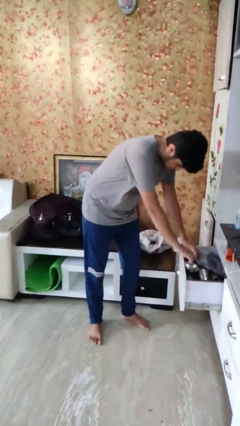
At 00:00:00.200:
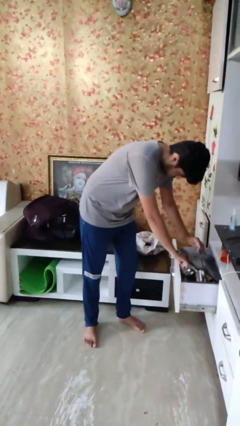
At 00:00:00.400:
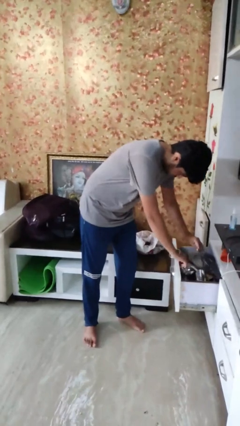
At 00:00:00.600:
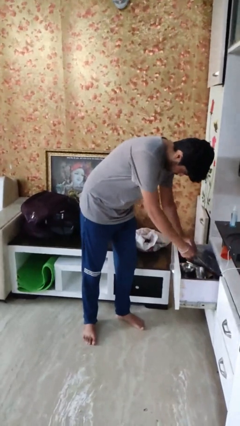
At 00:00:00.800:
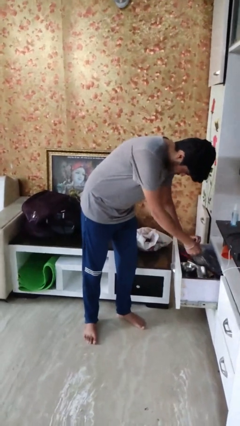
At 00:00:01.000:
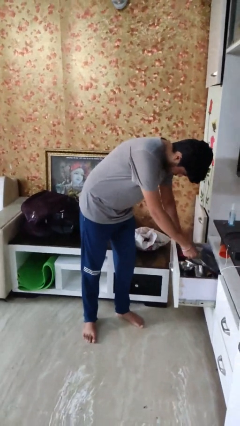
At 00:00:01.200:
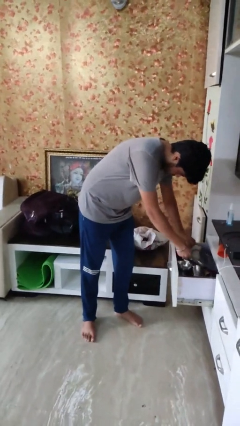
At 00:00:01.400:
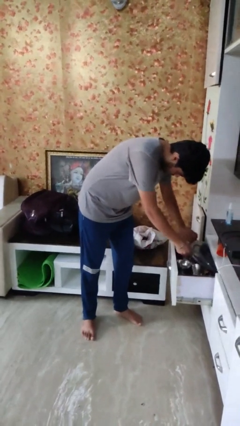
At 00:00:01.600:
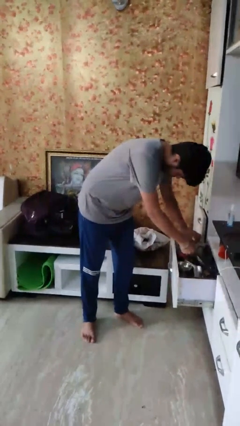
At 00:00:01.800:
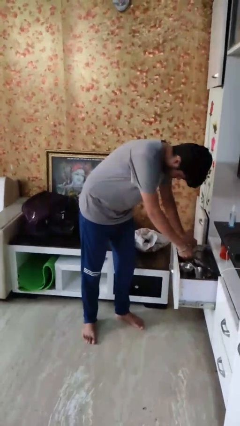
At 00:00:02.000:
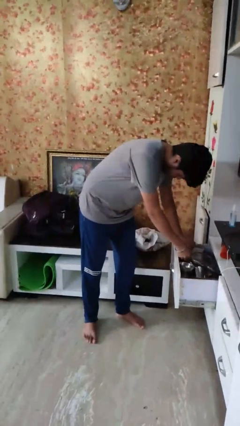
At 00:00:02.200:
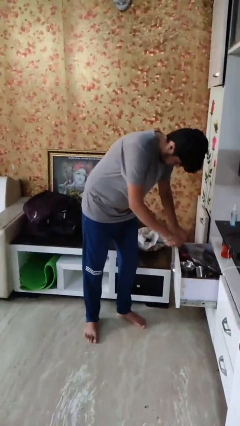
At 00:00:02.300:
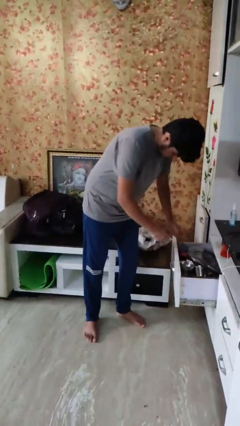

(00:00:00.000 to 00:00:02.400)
person searches in kitchen drawer

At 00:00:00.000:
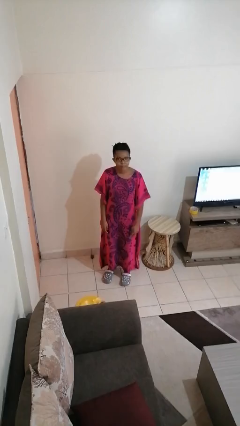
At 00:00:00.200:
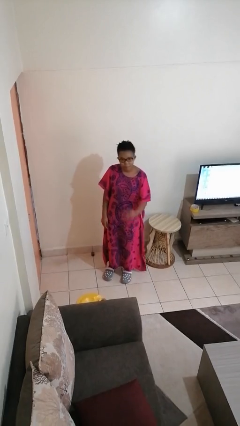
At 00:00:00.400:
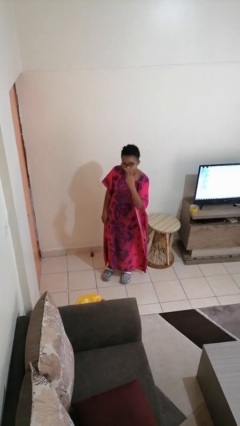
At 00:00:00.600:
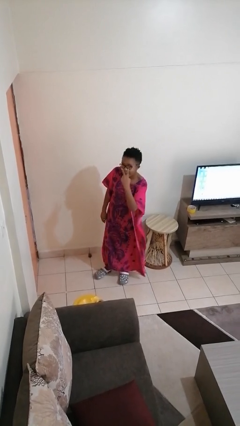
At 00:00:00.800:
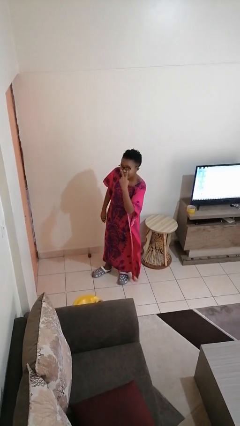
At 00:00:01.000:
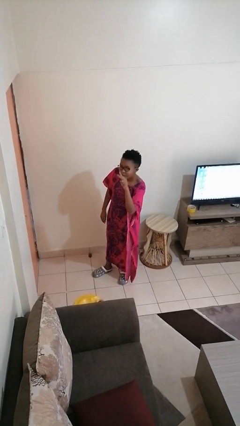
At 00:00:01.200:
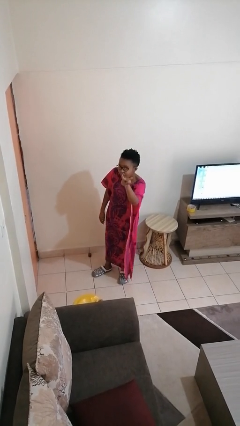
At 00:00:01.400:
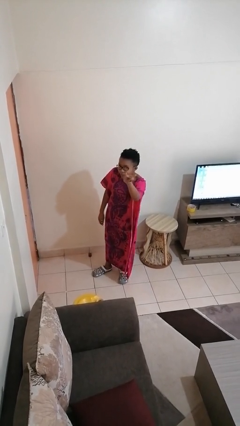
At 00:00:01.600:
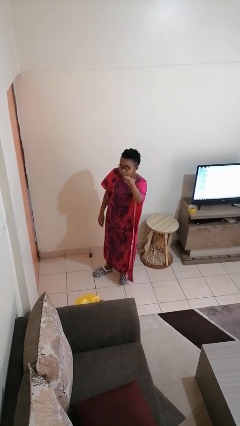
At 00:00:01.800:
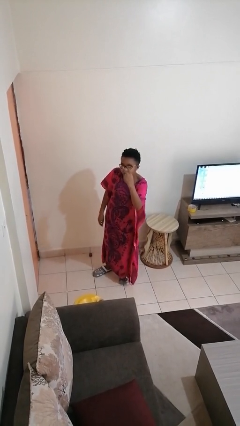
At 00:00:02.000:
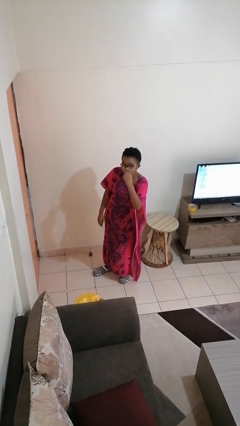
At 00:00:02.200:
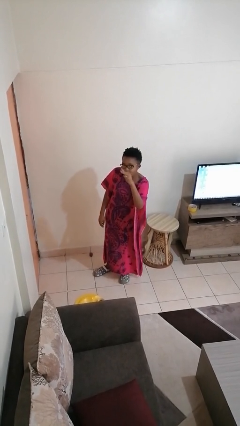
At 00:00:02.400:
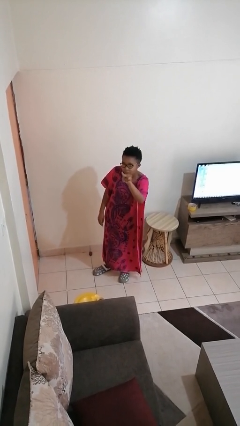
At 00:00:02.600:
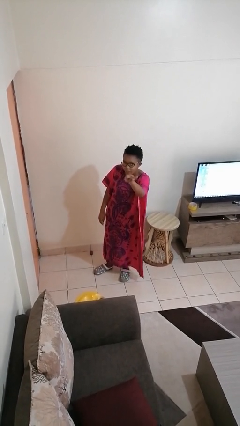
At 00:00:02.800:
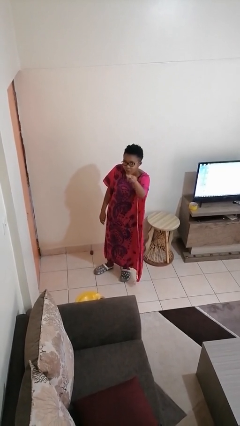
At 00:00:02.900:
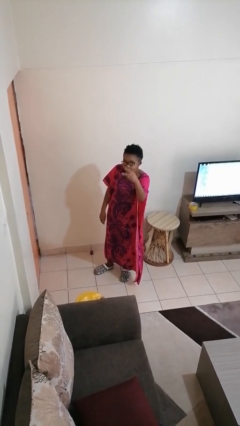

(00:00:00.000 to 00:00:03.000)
person gestures watch closely

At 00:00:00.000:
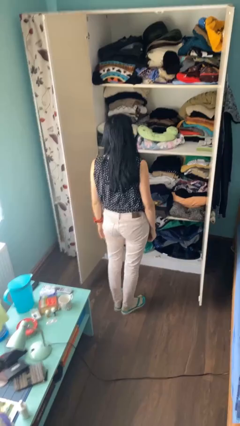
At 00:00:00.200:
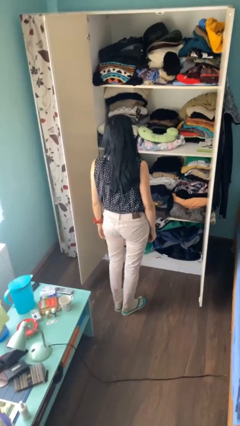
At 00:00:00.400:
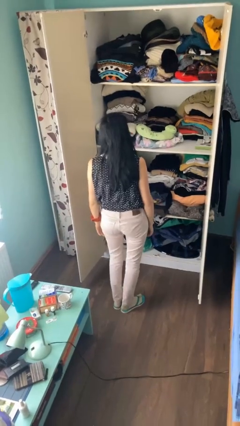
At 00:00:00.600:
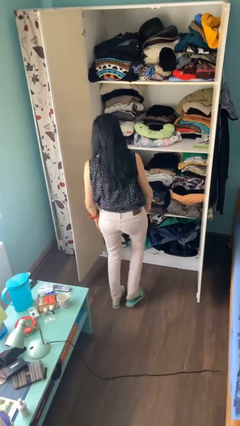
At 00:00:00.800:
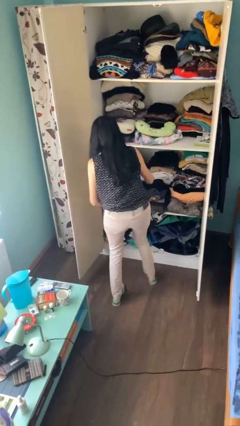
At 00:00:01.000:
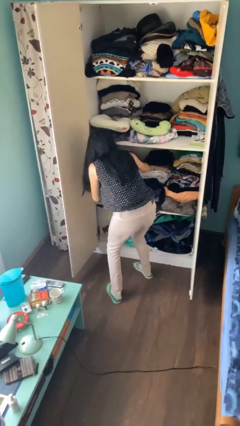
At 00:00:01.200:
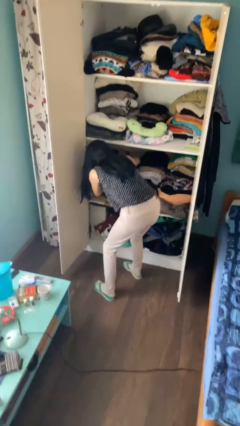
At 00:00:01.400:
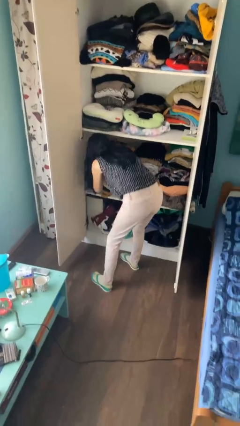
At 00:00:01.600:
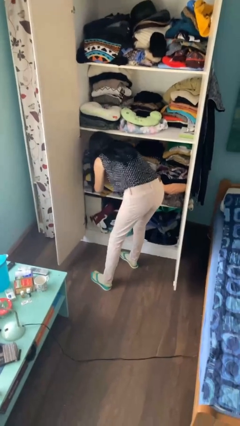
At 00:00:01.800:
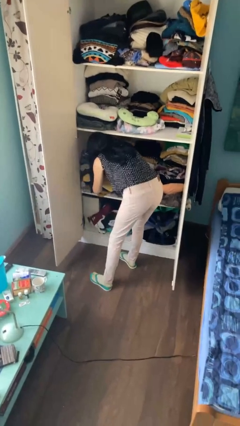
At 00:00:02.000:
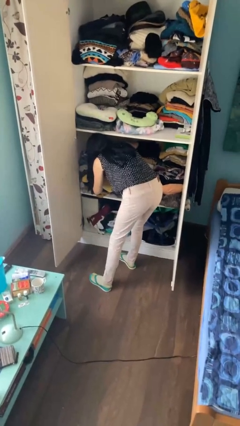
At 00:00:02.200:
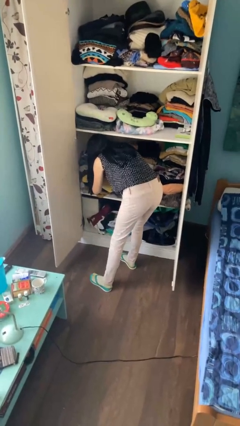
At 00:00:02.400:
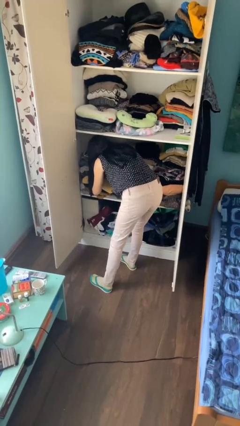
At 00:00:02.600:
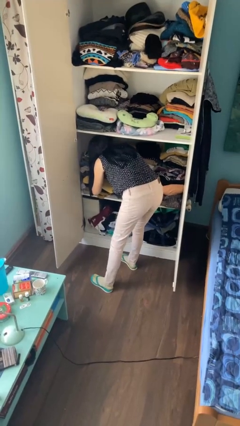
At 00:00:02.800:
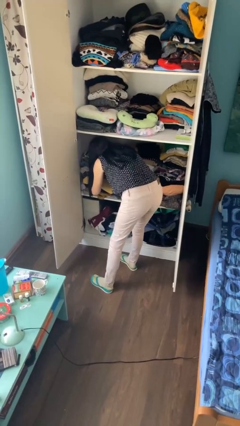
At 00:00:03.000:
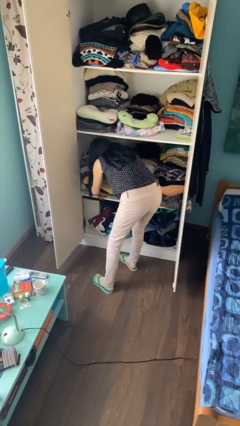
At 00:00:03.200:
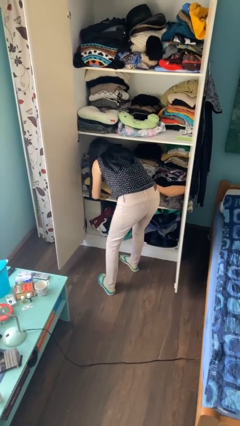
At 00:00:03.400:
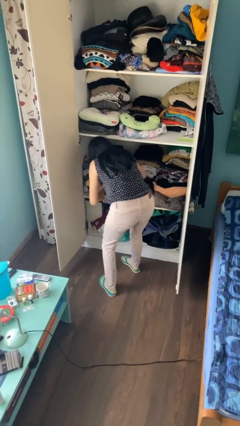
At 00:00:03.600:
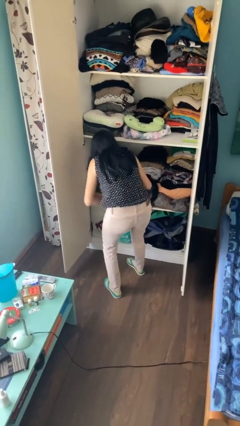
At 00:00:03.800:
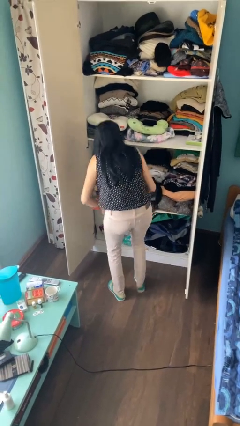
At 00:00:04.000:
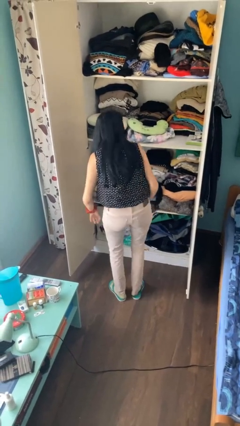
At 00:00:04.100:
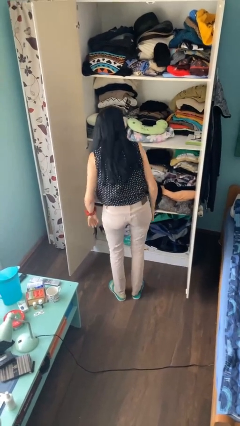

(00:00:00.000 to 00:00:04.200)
person searches in cabinet

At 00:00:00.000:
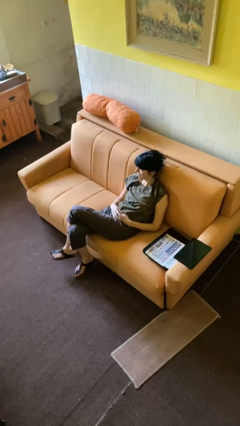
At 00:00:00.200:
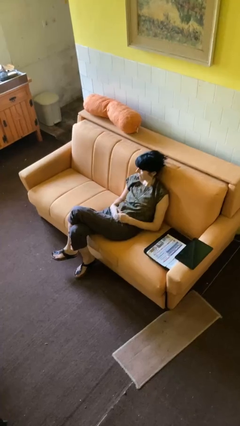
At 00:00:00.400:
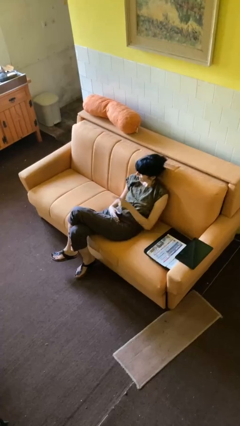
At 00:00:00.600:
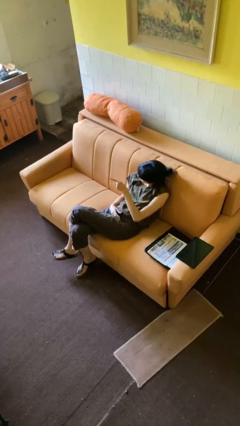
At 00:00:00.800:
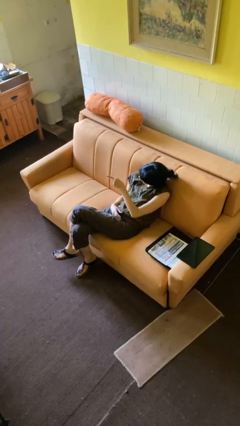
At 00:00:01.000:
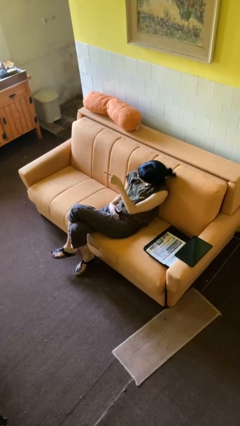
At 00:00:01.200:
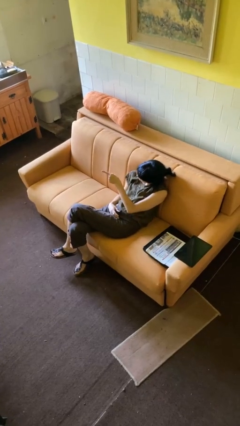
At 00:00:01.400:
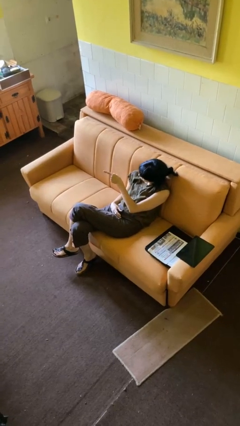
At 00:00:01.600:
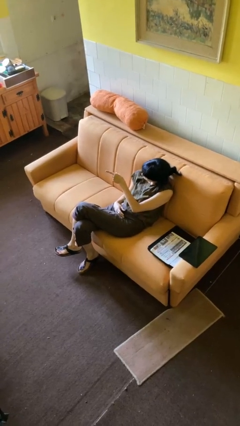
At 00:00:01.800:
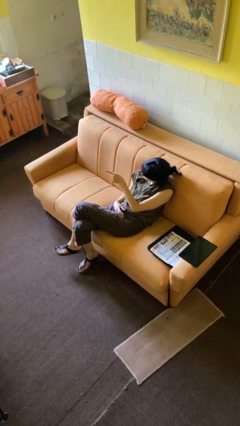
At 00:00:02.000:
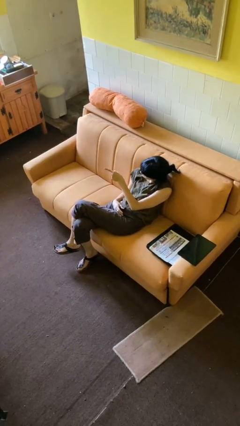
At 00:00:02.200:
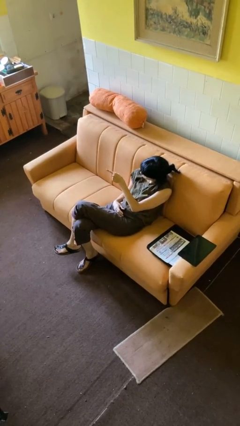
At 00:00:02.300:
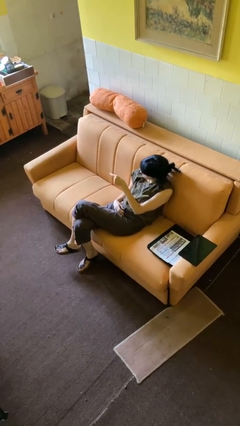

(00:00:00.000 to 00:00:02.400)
person points at person

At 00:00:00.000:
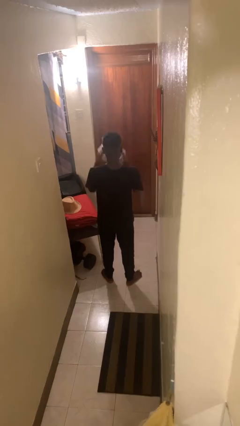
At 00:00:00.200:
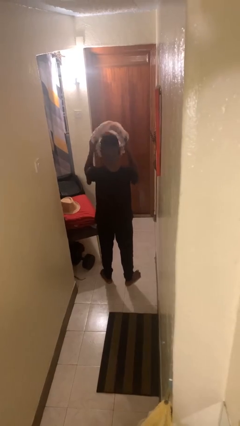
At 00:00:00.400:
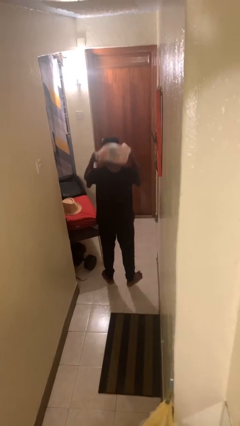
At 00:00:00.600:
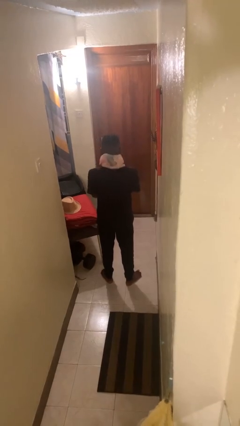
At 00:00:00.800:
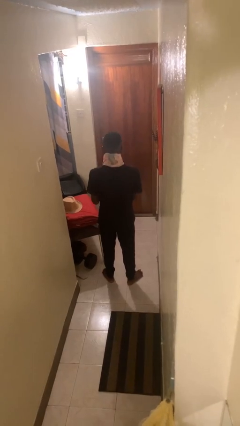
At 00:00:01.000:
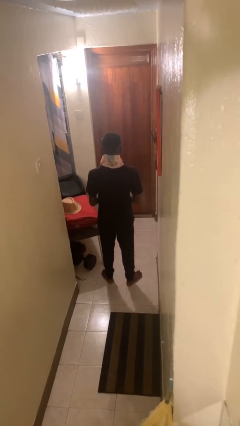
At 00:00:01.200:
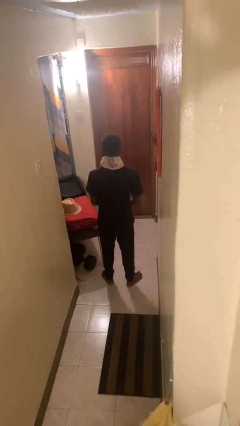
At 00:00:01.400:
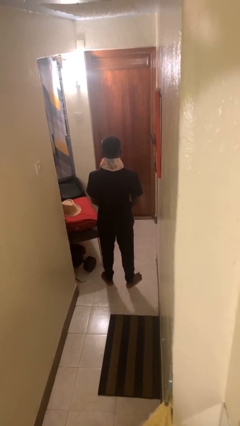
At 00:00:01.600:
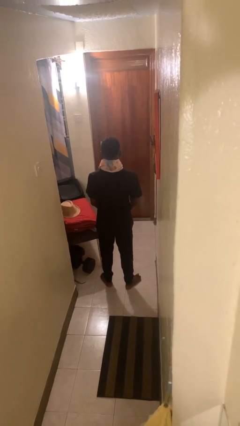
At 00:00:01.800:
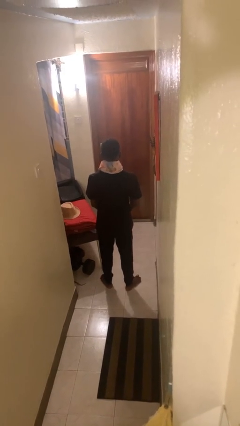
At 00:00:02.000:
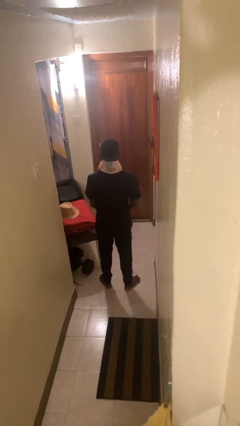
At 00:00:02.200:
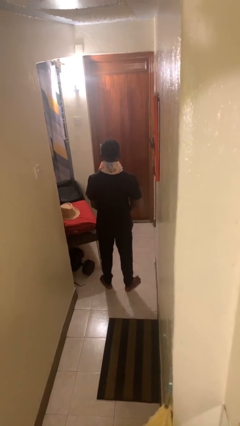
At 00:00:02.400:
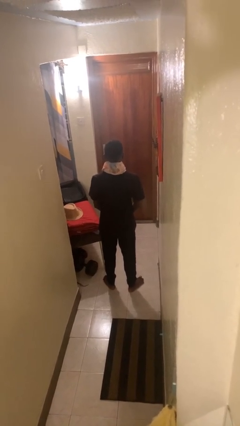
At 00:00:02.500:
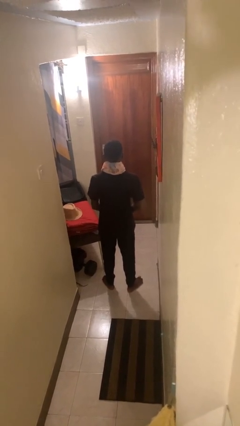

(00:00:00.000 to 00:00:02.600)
person puts on scarf

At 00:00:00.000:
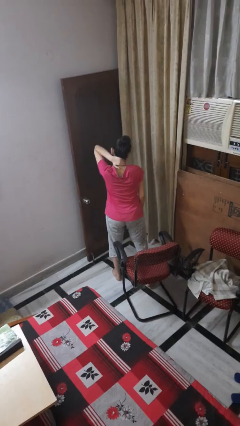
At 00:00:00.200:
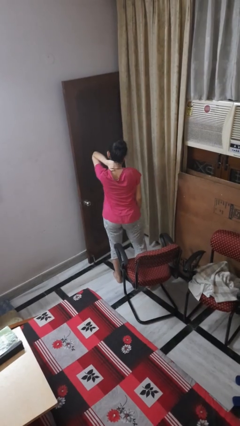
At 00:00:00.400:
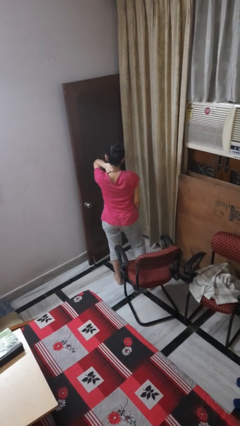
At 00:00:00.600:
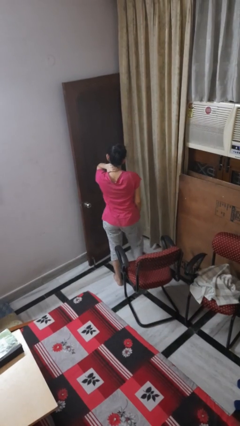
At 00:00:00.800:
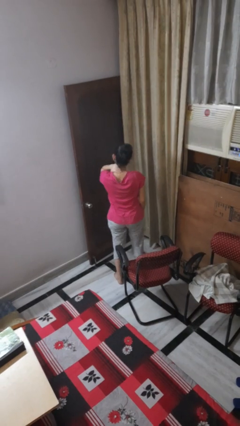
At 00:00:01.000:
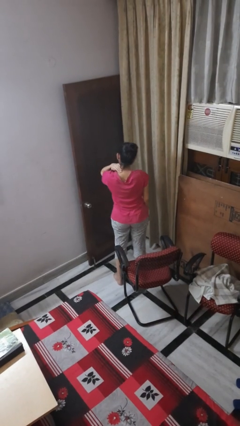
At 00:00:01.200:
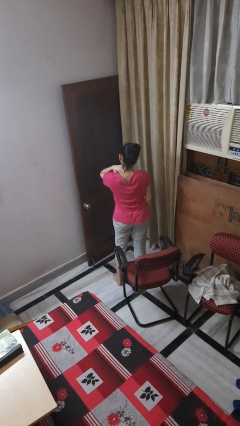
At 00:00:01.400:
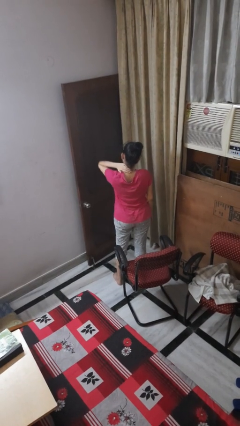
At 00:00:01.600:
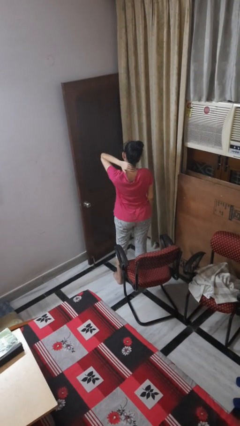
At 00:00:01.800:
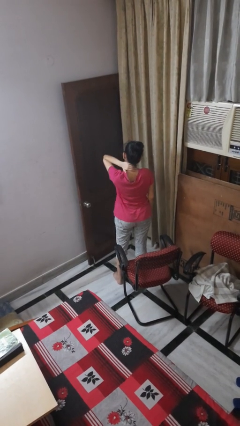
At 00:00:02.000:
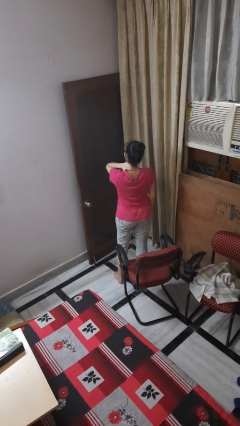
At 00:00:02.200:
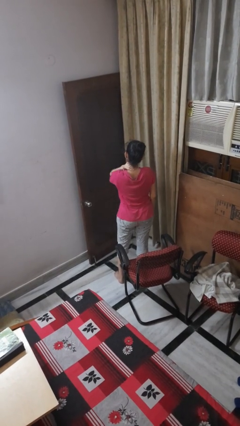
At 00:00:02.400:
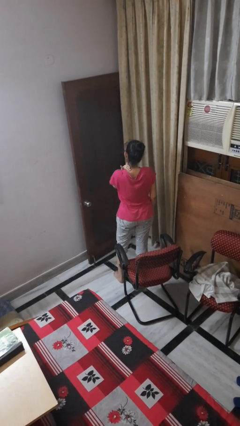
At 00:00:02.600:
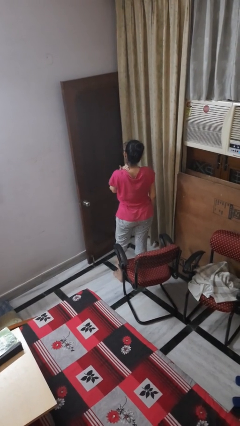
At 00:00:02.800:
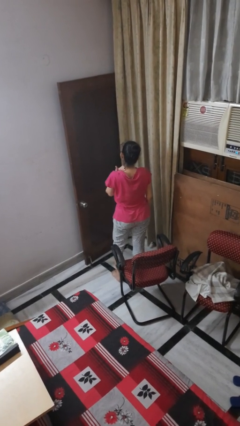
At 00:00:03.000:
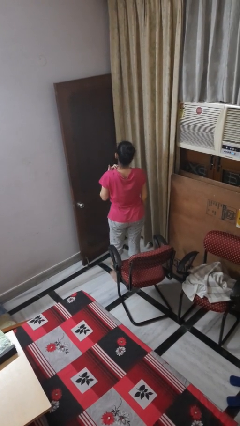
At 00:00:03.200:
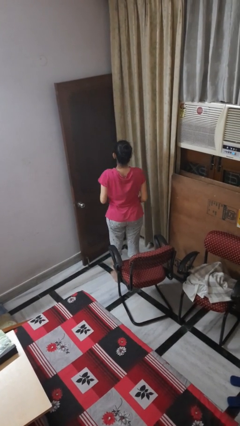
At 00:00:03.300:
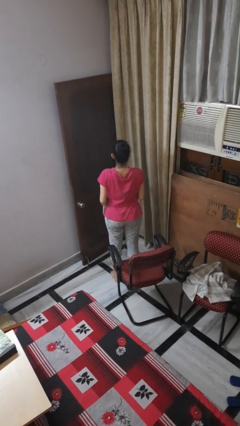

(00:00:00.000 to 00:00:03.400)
person rubs neck
